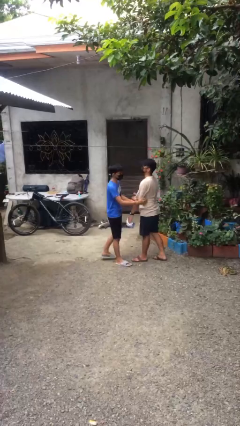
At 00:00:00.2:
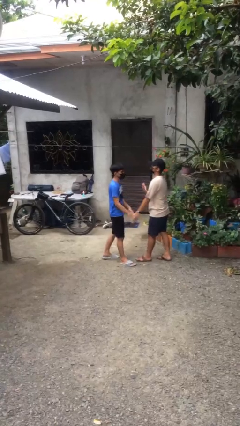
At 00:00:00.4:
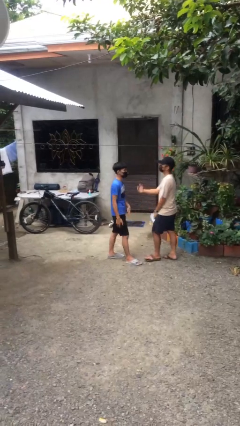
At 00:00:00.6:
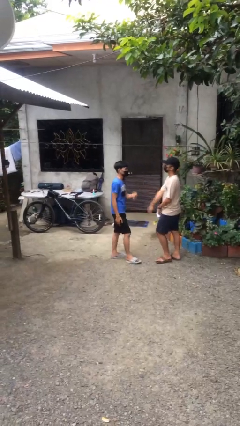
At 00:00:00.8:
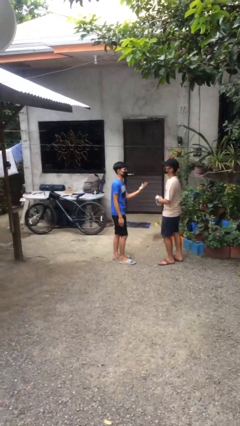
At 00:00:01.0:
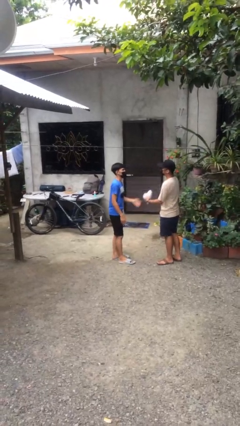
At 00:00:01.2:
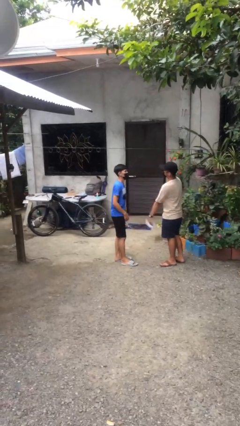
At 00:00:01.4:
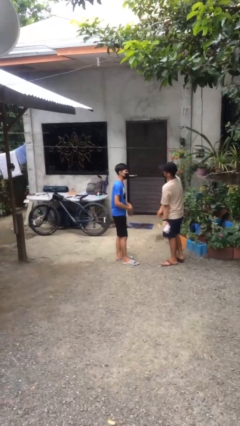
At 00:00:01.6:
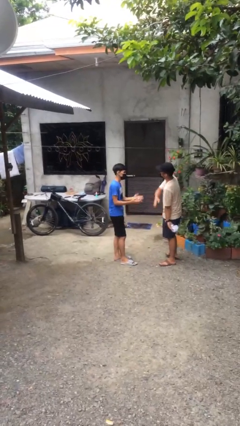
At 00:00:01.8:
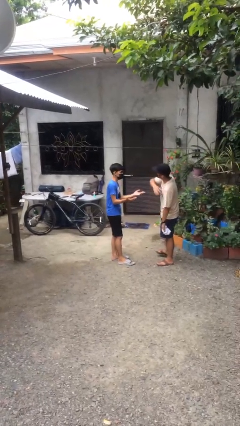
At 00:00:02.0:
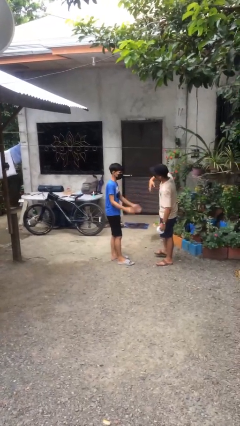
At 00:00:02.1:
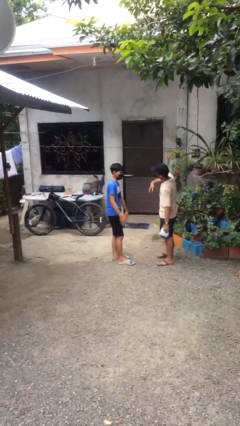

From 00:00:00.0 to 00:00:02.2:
person talks to person

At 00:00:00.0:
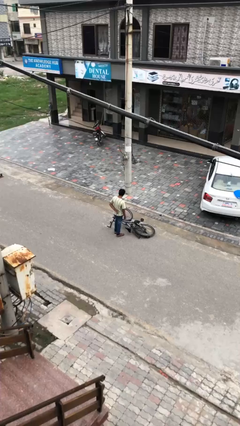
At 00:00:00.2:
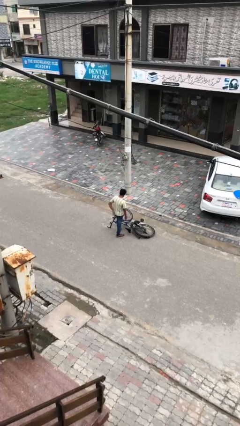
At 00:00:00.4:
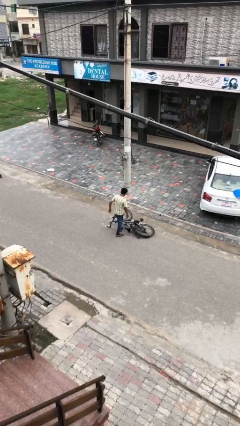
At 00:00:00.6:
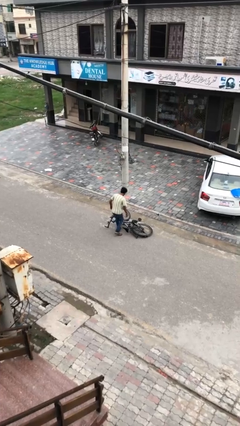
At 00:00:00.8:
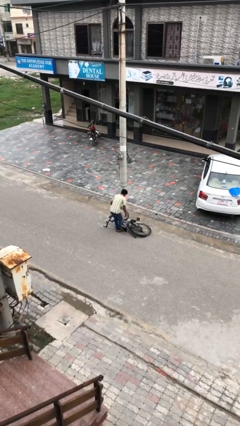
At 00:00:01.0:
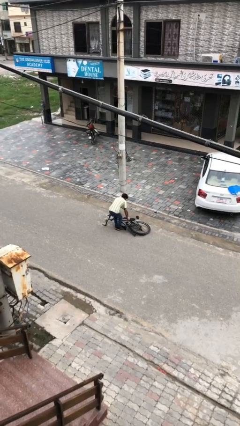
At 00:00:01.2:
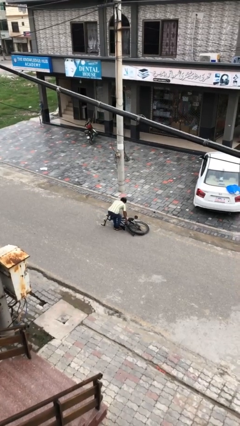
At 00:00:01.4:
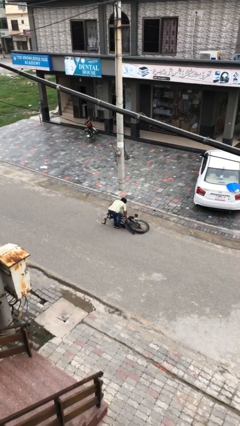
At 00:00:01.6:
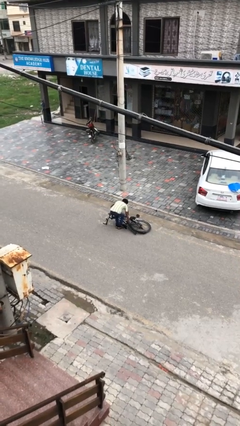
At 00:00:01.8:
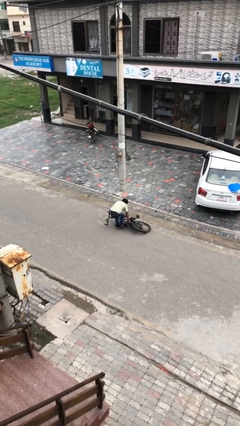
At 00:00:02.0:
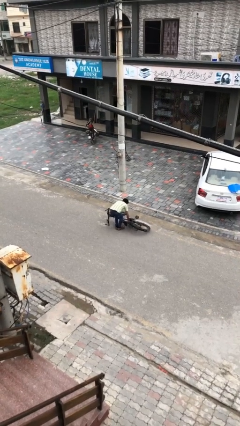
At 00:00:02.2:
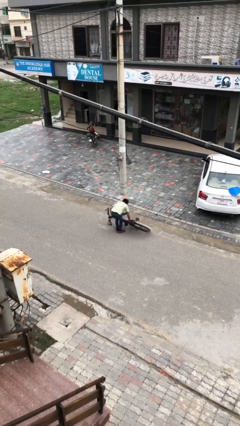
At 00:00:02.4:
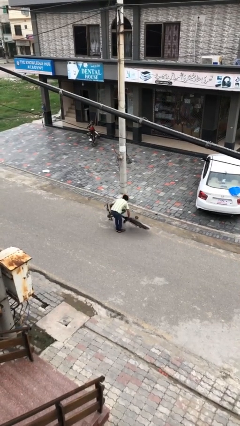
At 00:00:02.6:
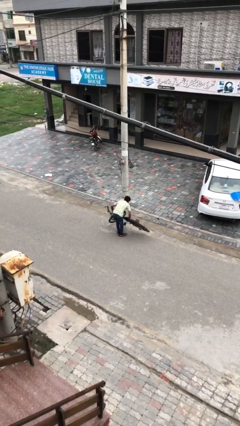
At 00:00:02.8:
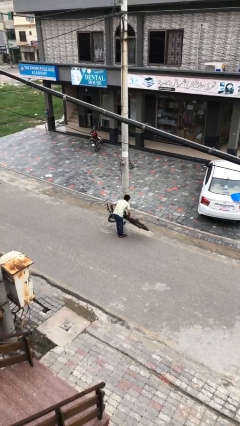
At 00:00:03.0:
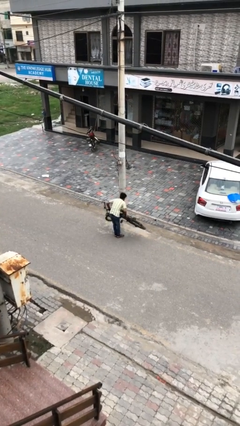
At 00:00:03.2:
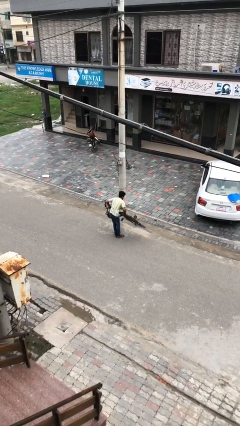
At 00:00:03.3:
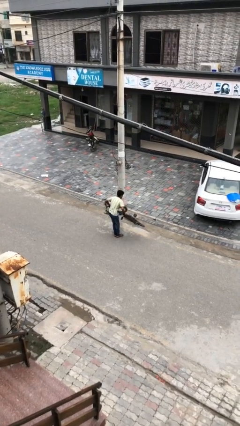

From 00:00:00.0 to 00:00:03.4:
person picks up object from floor

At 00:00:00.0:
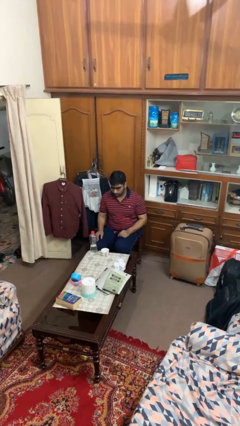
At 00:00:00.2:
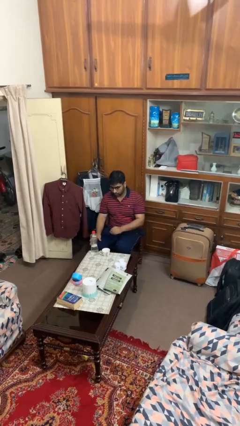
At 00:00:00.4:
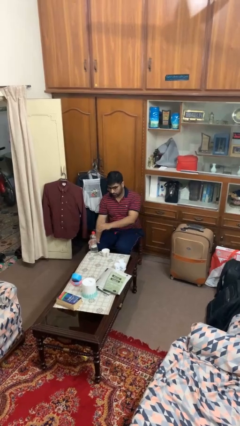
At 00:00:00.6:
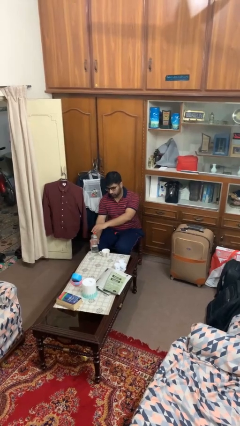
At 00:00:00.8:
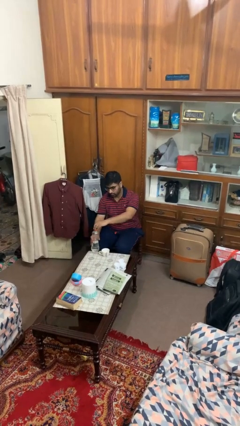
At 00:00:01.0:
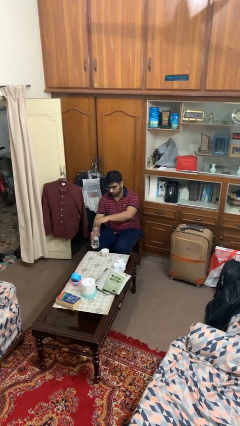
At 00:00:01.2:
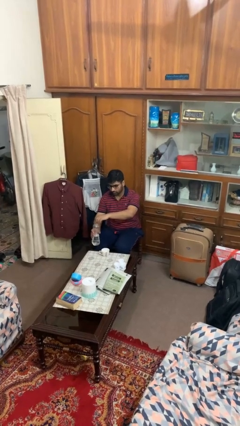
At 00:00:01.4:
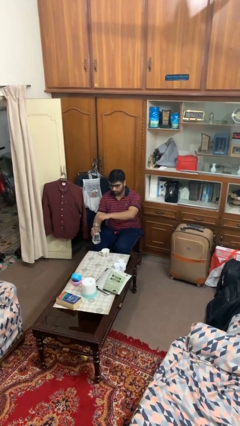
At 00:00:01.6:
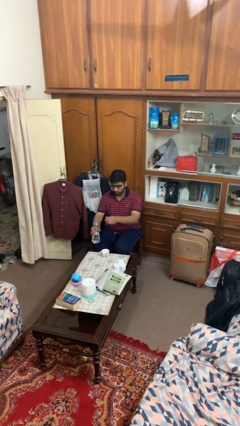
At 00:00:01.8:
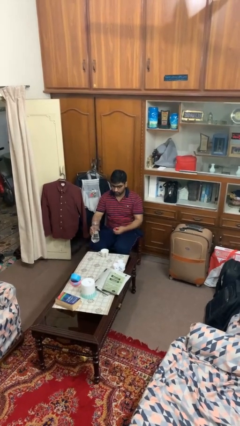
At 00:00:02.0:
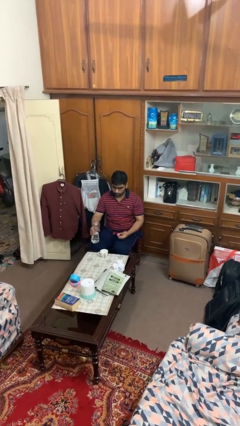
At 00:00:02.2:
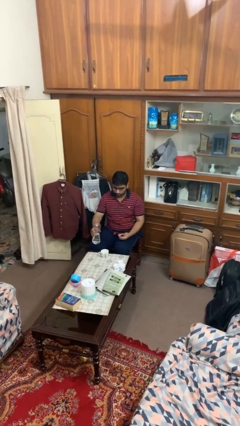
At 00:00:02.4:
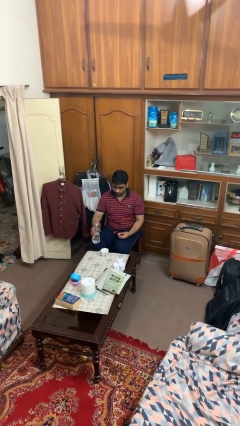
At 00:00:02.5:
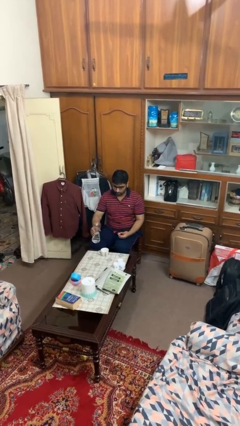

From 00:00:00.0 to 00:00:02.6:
person unscrews lid from bottle

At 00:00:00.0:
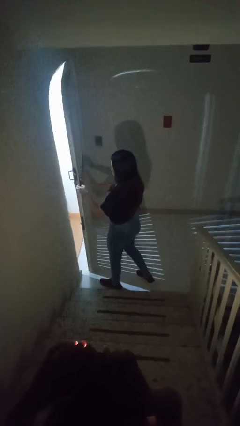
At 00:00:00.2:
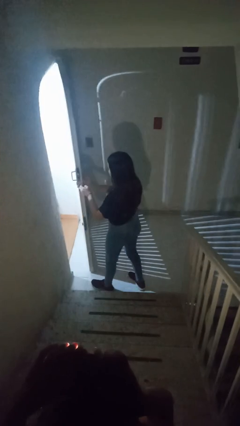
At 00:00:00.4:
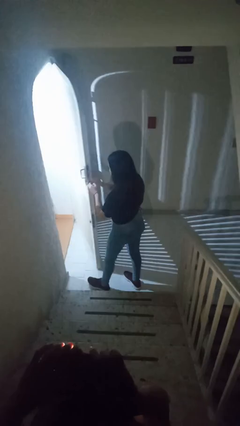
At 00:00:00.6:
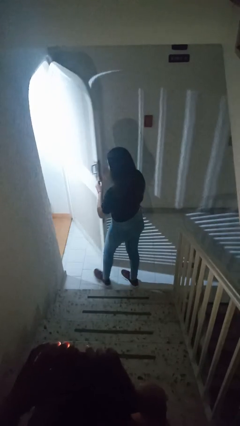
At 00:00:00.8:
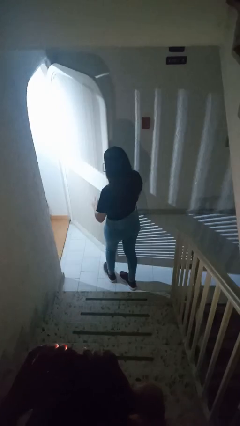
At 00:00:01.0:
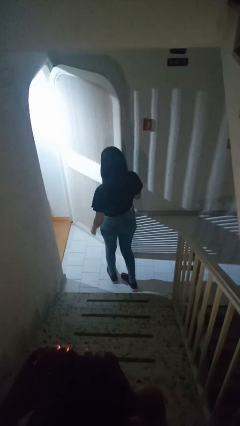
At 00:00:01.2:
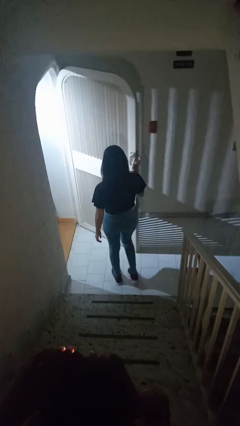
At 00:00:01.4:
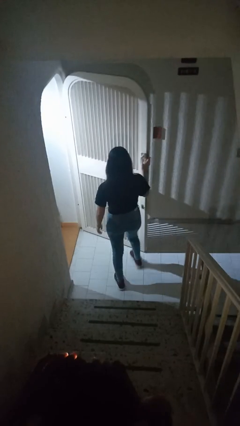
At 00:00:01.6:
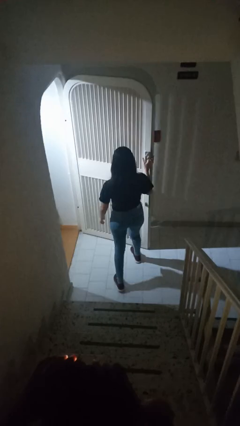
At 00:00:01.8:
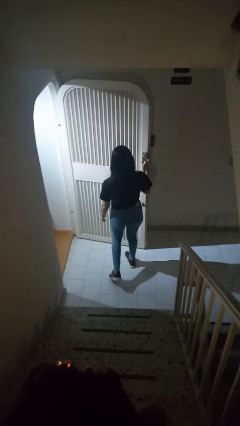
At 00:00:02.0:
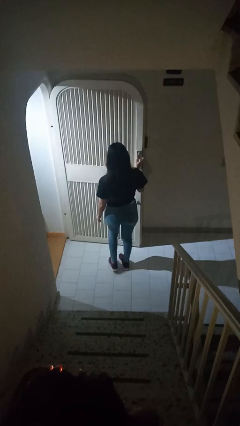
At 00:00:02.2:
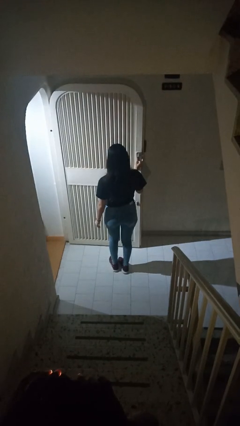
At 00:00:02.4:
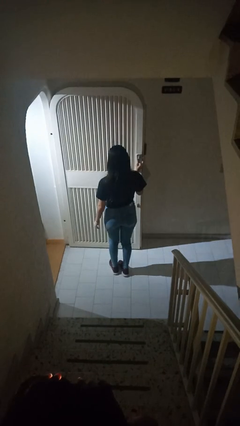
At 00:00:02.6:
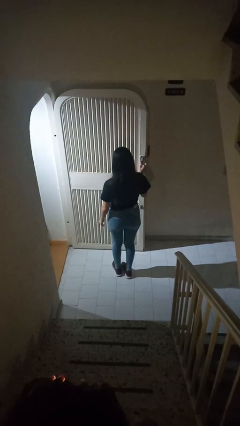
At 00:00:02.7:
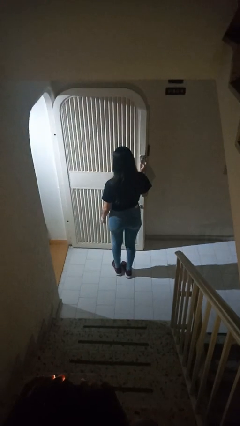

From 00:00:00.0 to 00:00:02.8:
person opens facility door

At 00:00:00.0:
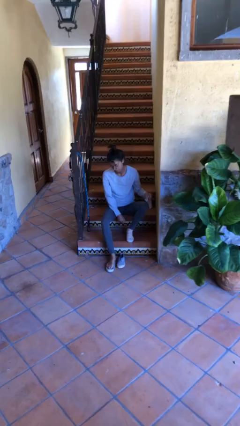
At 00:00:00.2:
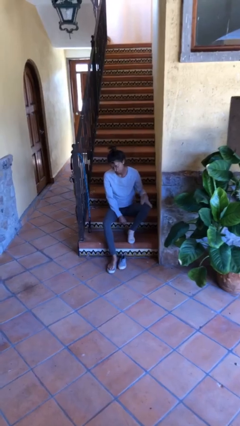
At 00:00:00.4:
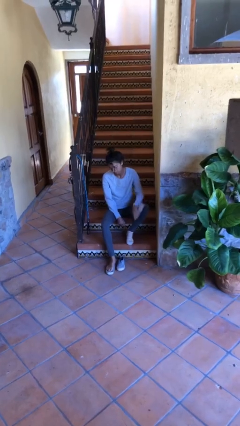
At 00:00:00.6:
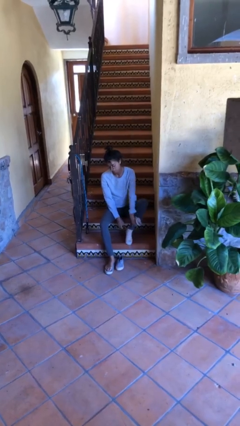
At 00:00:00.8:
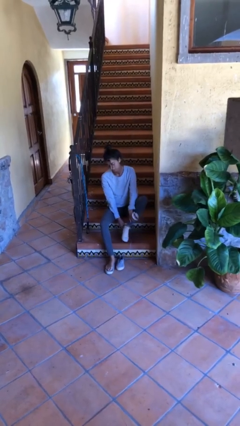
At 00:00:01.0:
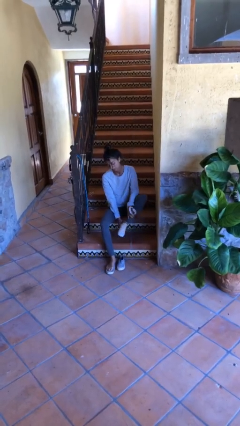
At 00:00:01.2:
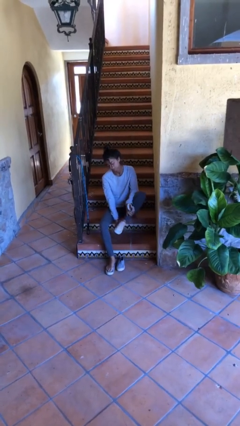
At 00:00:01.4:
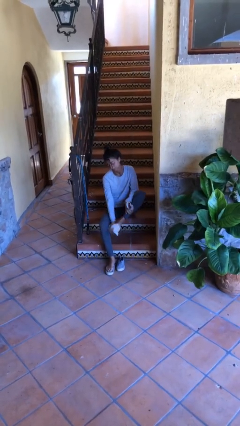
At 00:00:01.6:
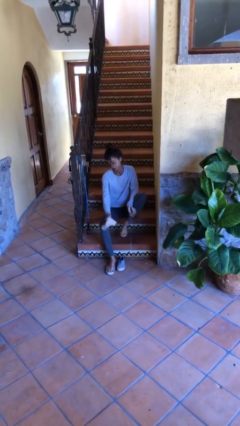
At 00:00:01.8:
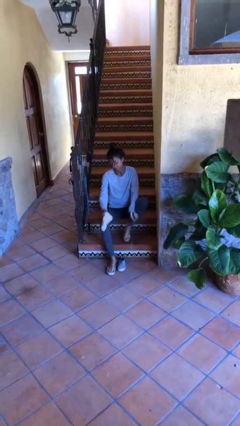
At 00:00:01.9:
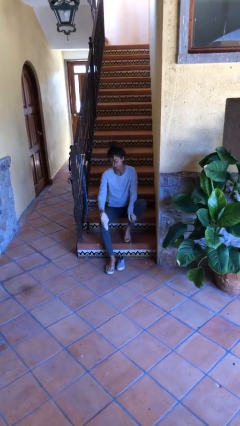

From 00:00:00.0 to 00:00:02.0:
person takes off socks

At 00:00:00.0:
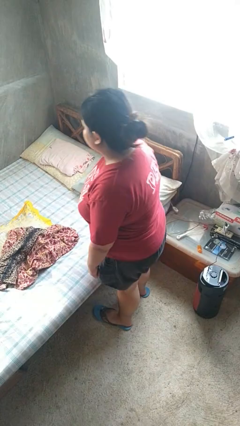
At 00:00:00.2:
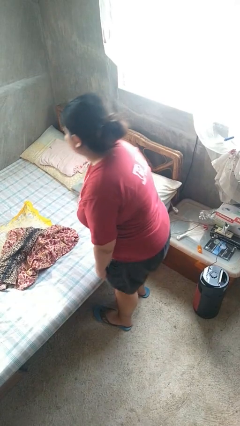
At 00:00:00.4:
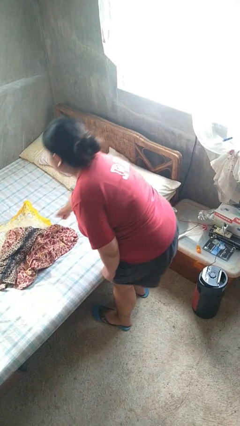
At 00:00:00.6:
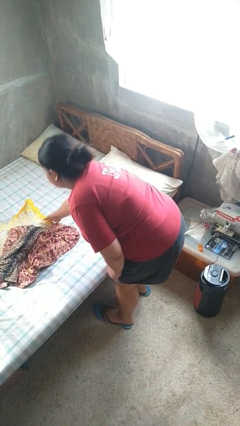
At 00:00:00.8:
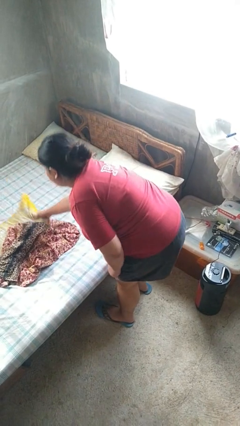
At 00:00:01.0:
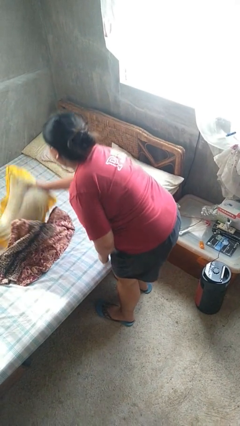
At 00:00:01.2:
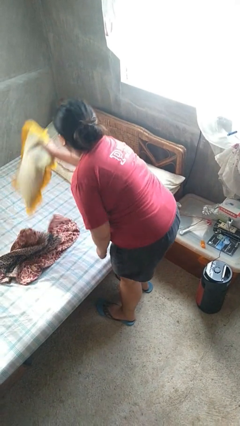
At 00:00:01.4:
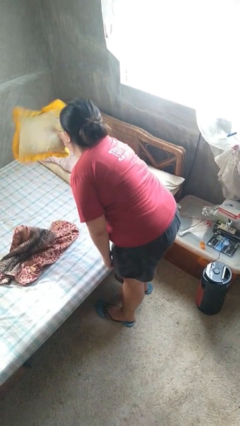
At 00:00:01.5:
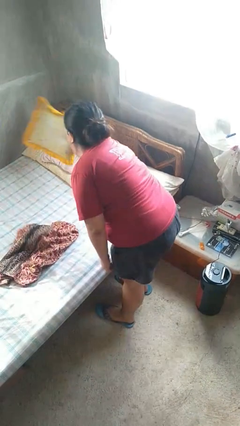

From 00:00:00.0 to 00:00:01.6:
person makes bed

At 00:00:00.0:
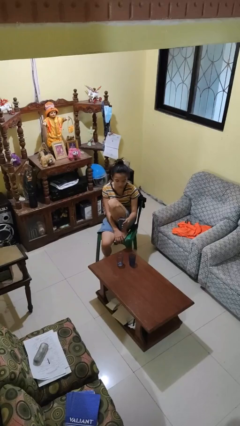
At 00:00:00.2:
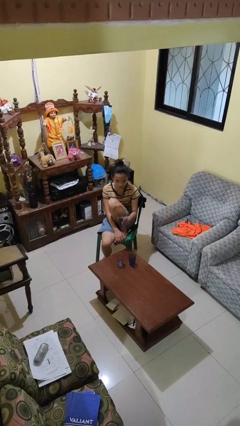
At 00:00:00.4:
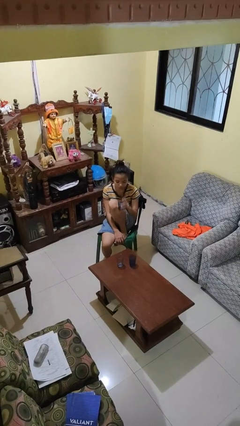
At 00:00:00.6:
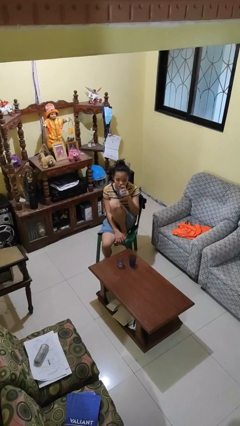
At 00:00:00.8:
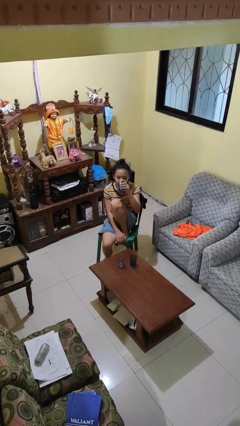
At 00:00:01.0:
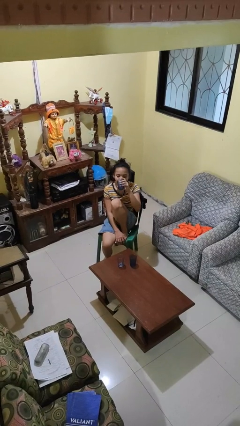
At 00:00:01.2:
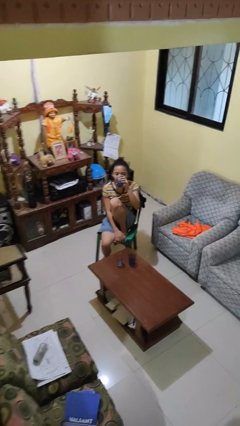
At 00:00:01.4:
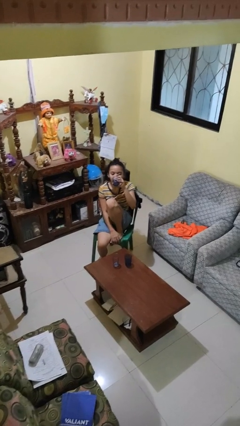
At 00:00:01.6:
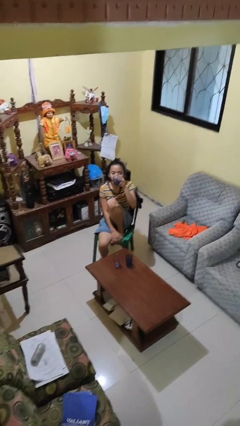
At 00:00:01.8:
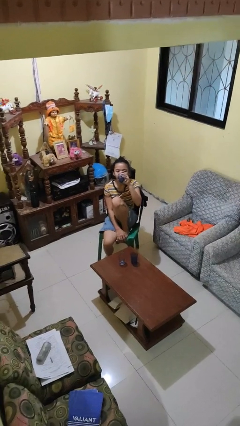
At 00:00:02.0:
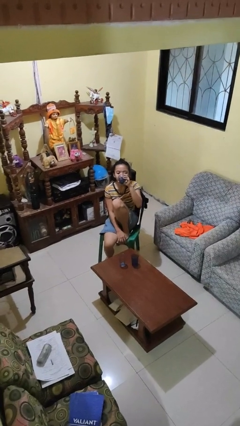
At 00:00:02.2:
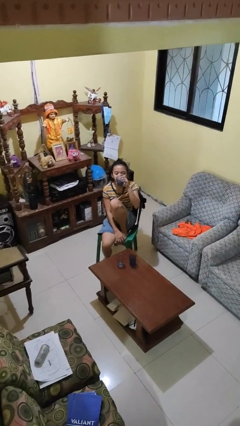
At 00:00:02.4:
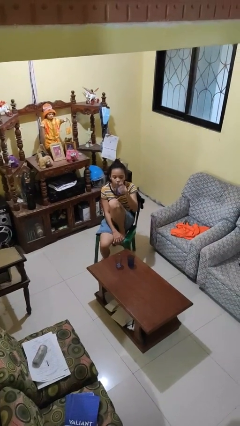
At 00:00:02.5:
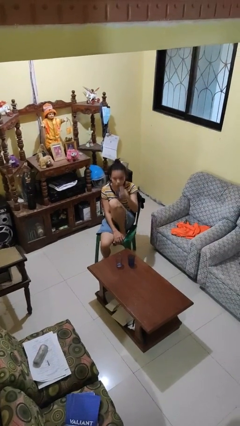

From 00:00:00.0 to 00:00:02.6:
person drinks from shotglass
